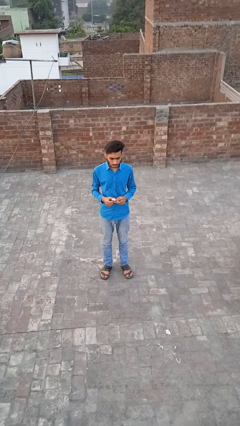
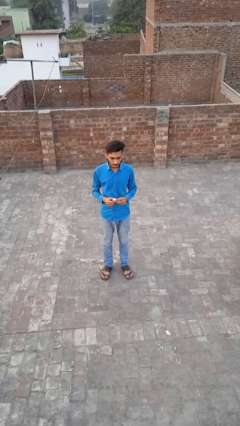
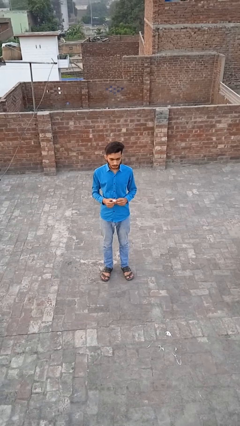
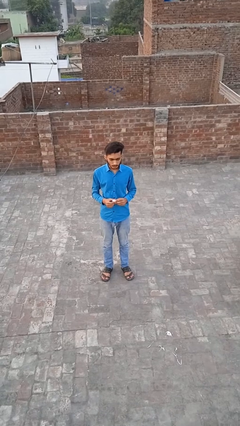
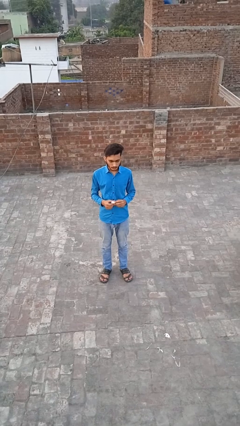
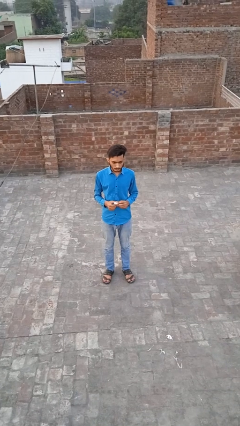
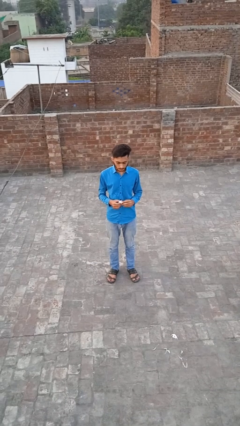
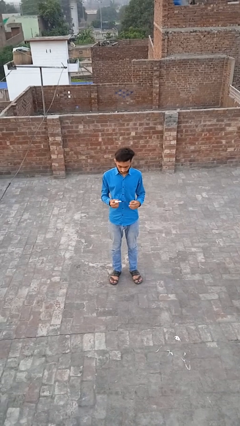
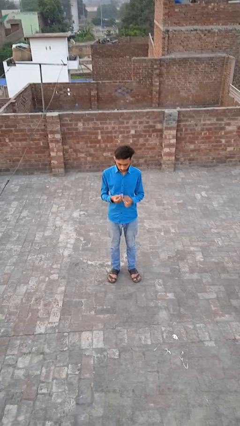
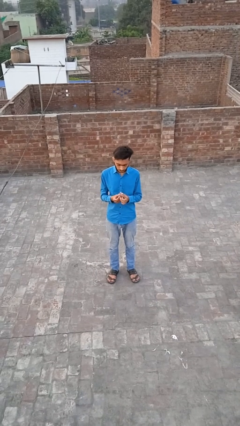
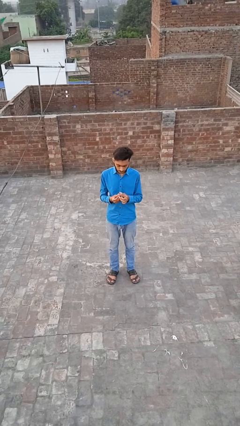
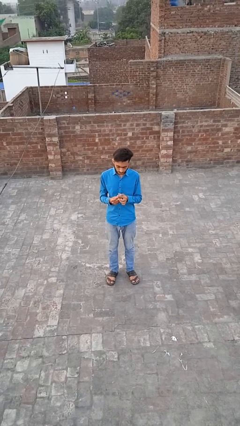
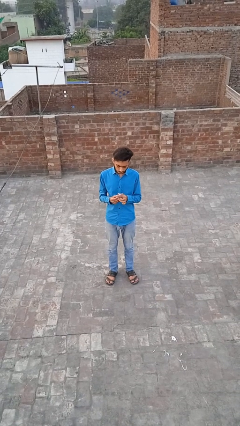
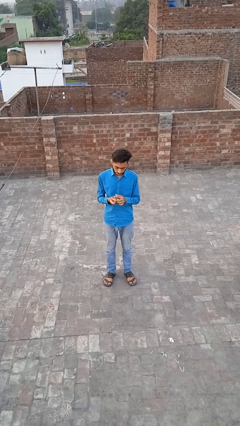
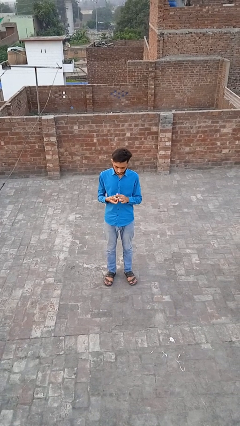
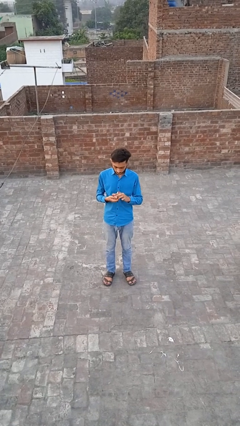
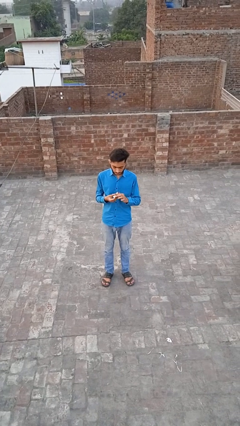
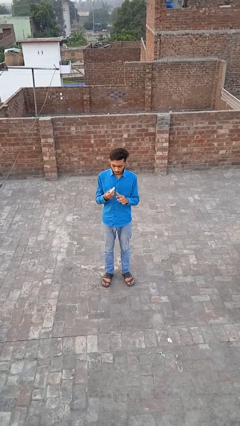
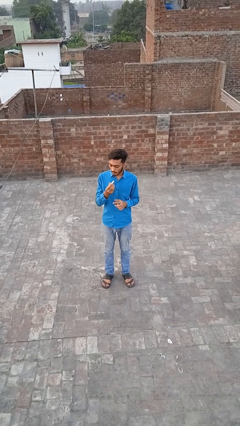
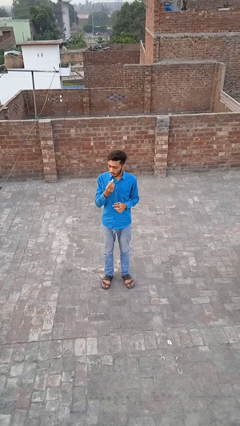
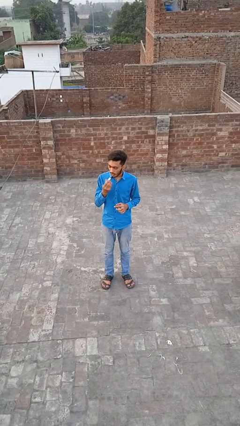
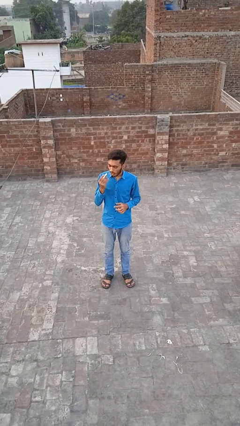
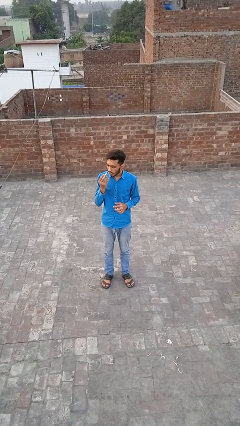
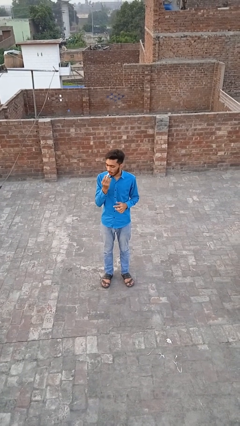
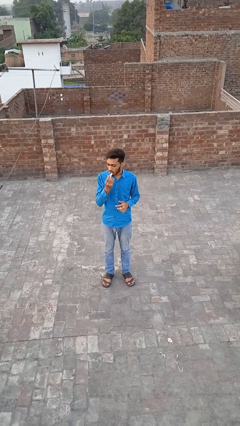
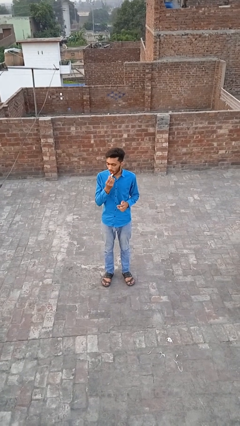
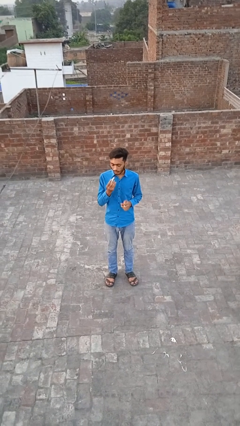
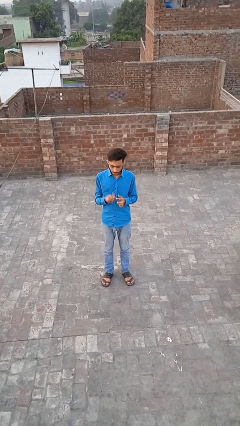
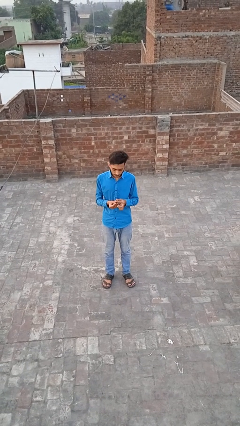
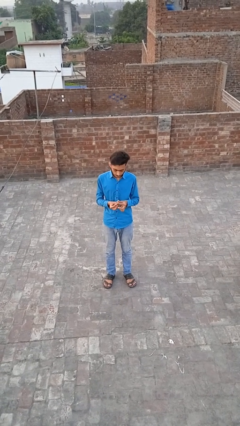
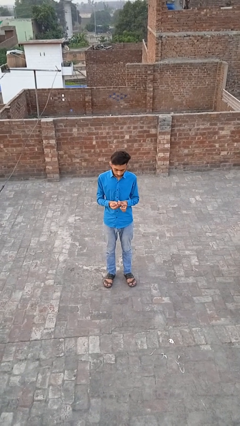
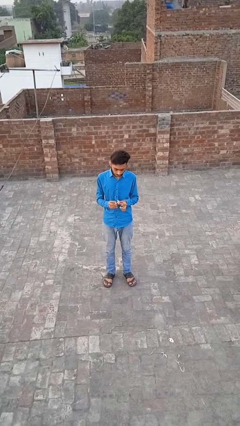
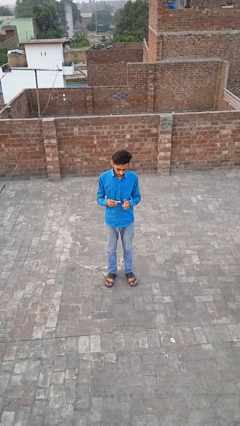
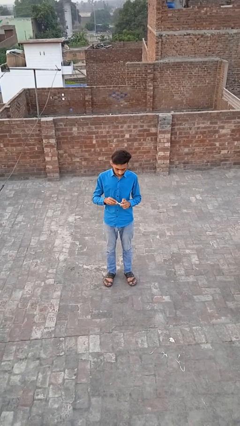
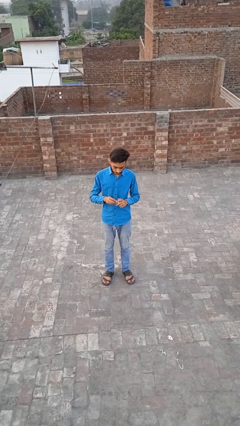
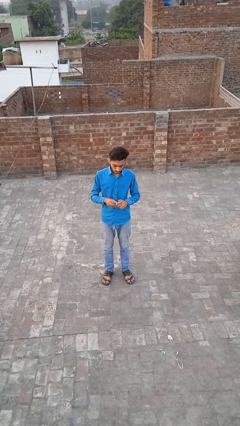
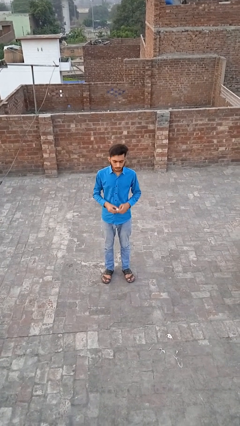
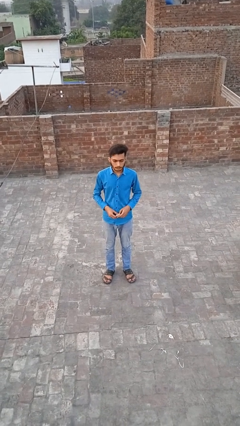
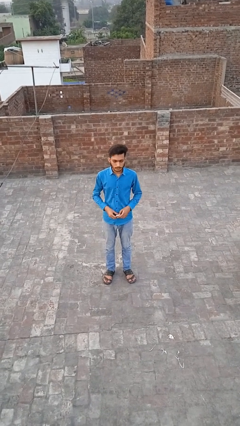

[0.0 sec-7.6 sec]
person applies lip makeup

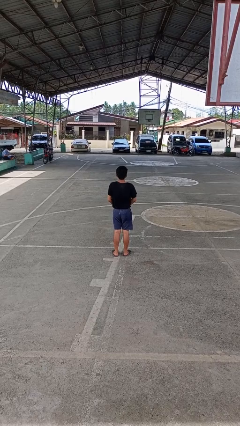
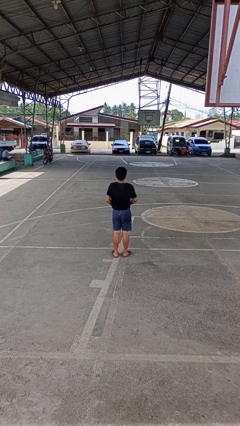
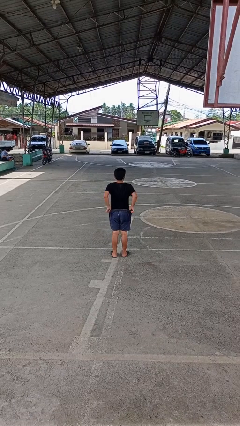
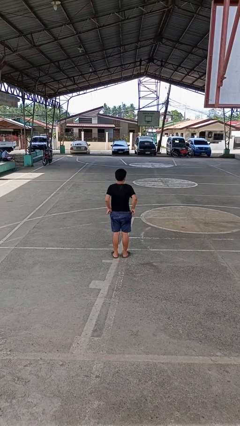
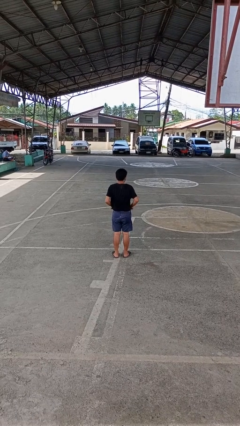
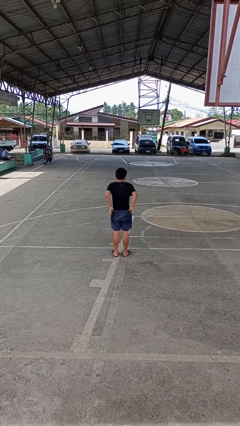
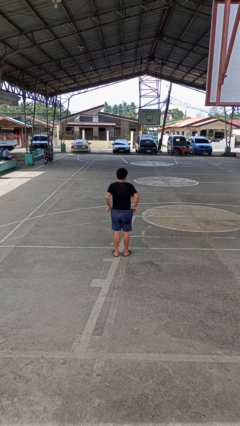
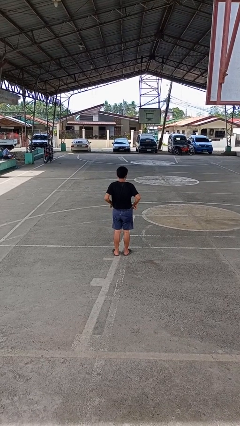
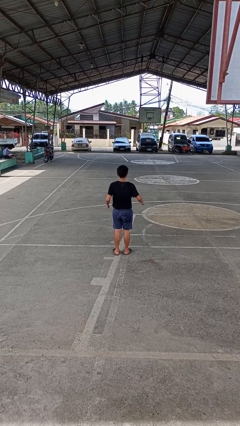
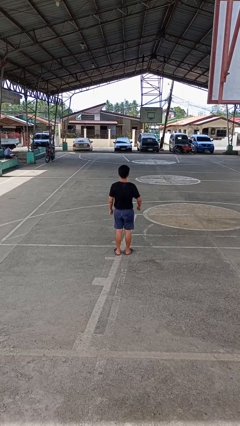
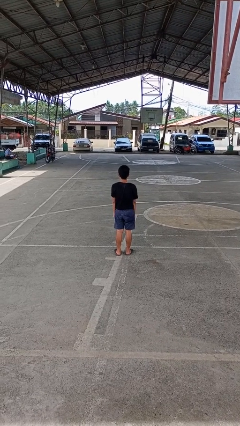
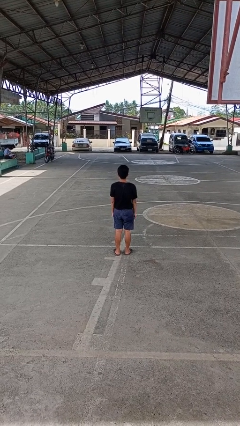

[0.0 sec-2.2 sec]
person hikes up pants

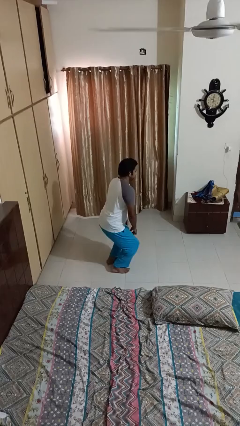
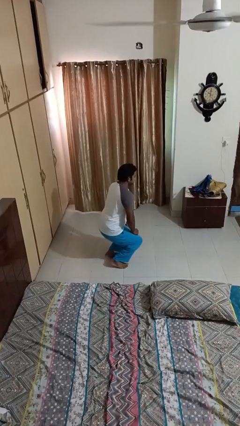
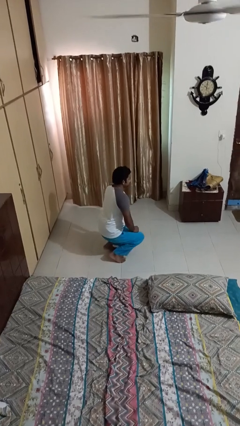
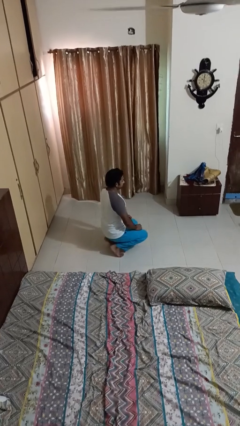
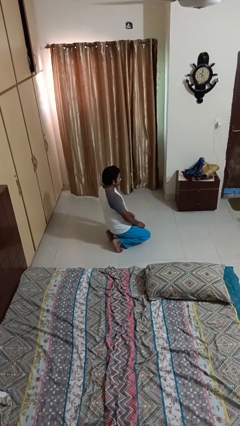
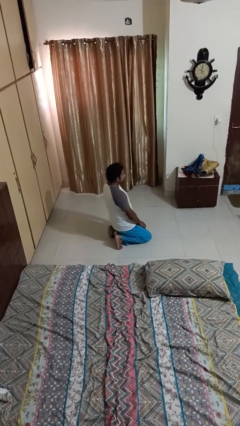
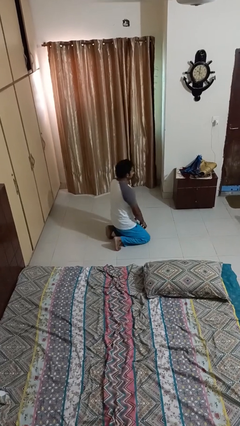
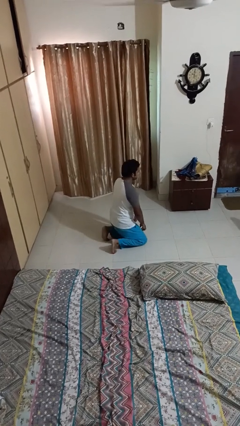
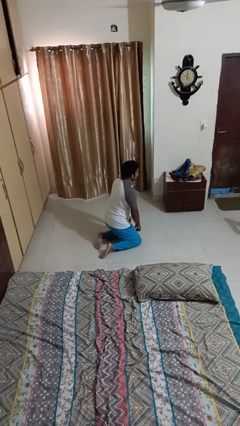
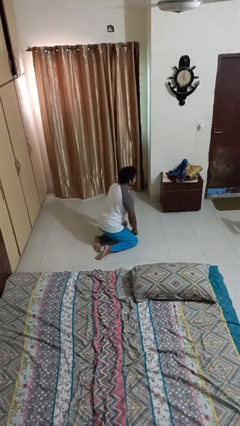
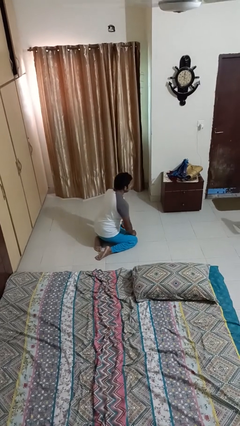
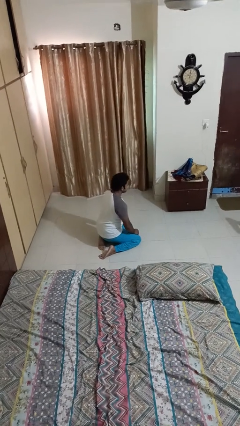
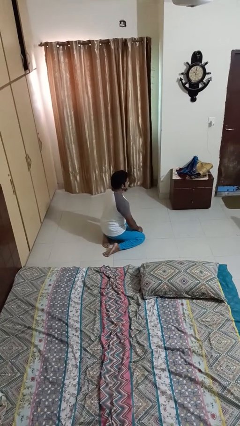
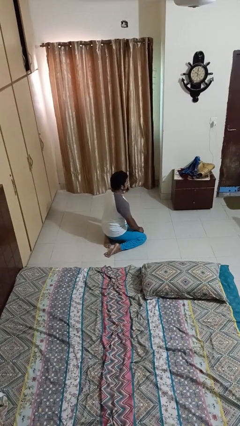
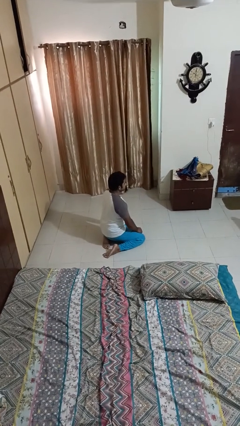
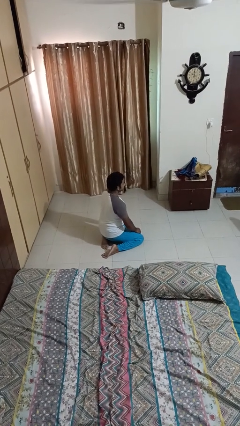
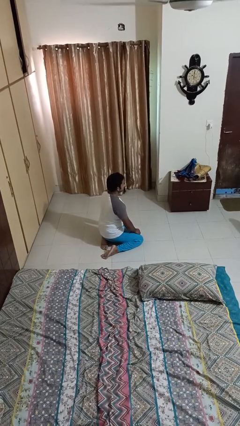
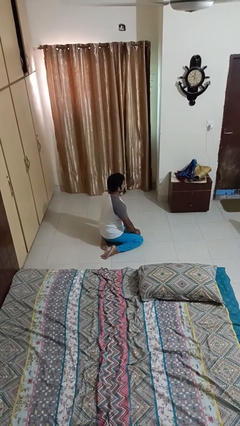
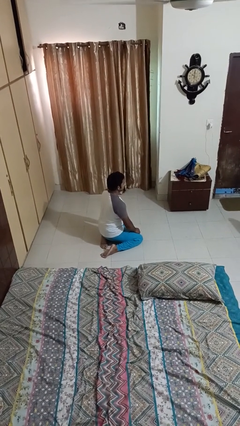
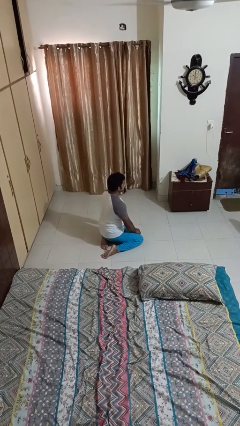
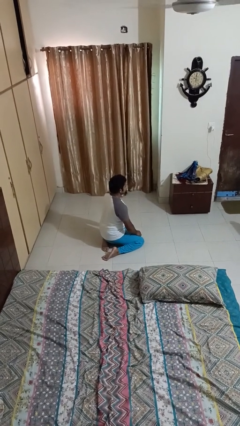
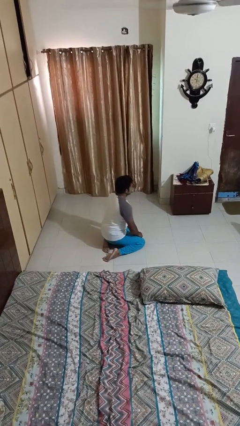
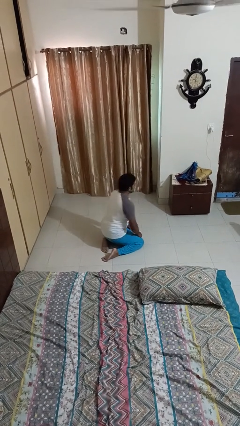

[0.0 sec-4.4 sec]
person kneels

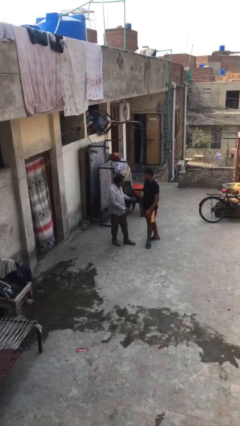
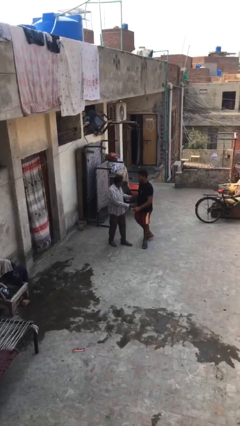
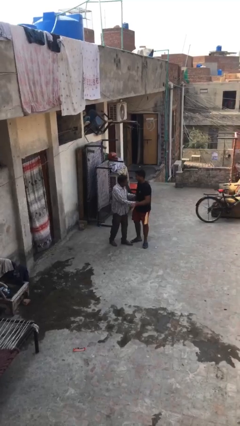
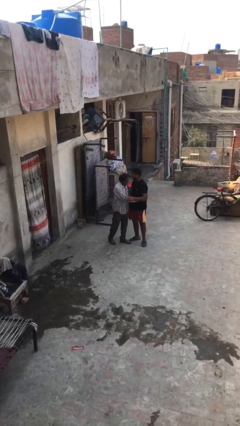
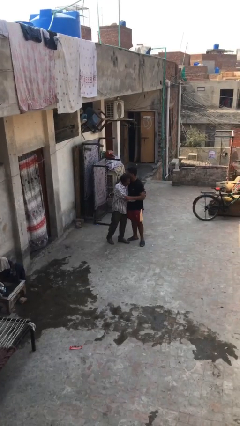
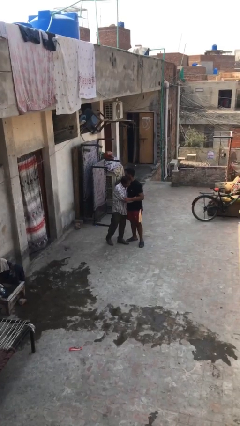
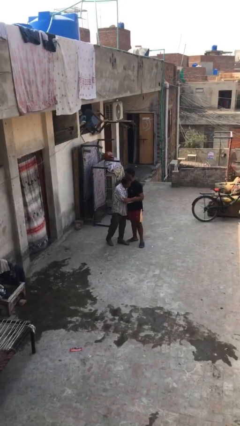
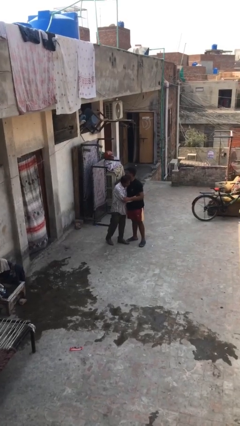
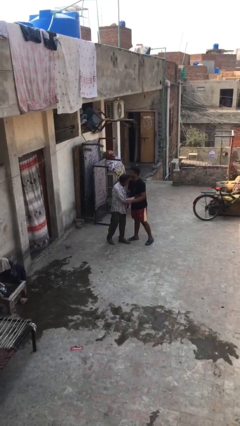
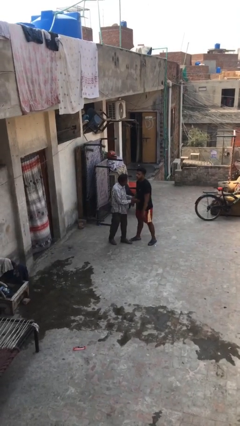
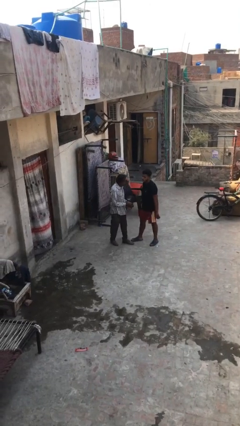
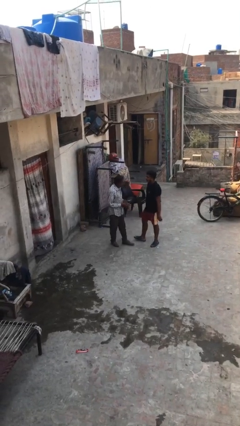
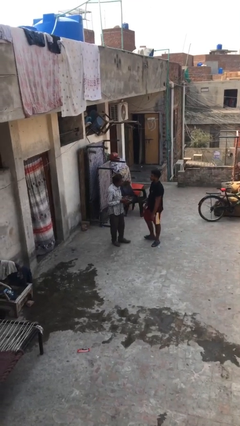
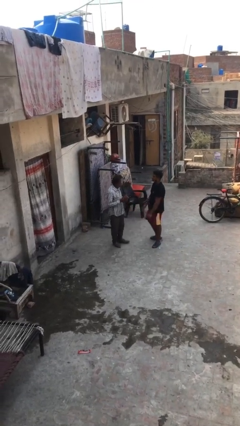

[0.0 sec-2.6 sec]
person embraces person

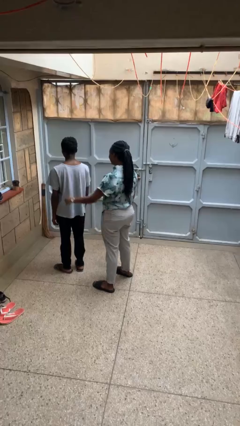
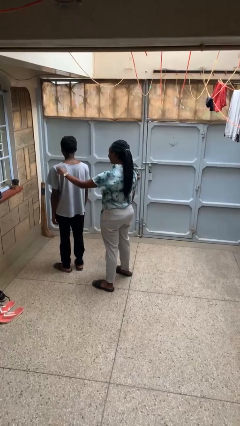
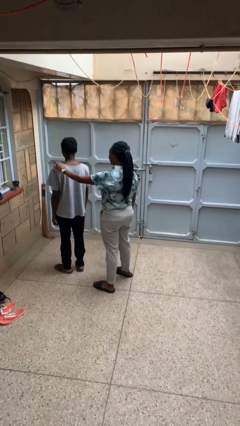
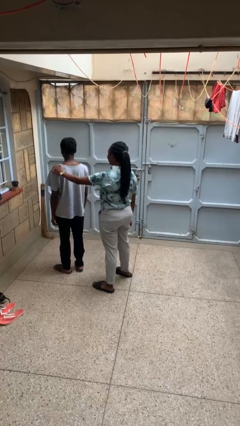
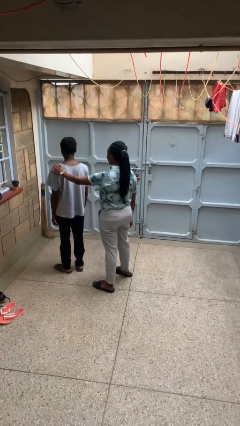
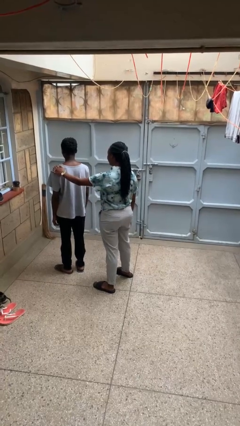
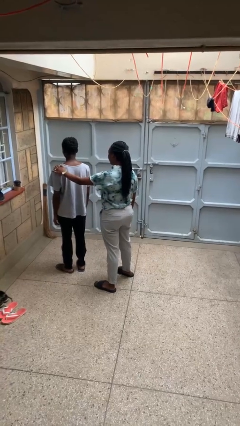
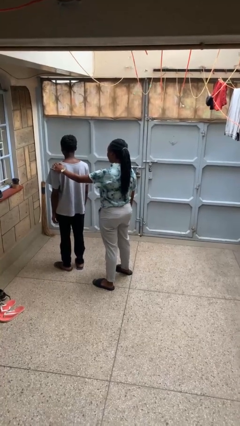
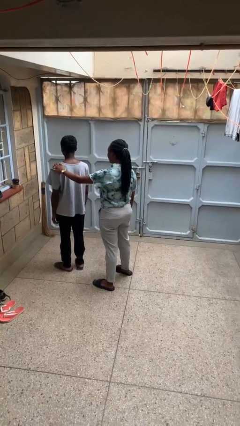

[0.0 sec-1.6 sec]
person grabs person by shoulder
